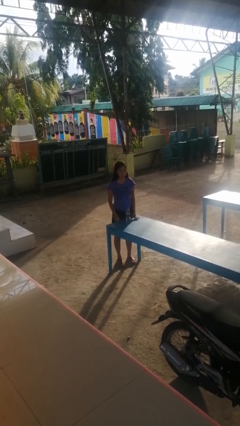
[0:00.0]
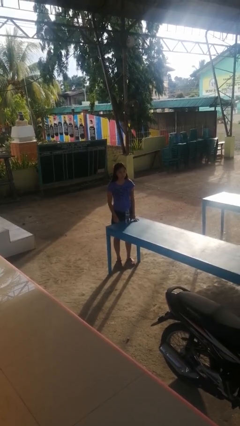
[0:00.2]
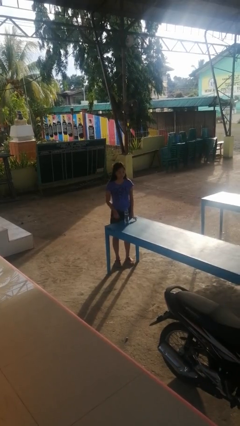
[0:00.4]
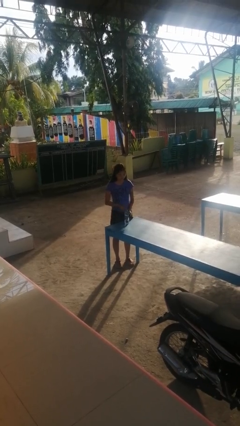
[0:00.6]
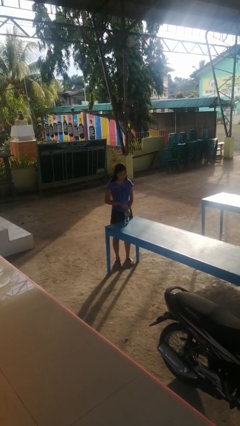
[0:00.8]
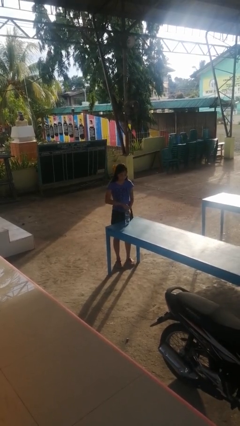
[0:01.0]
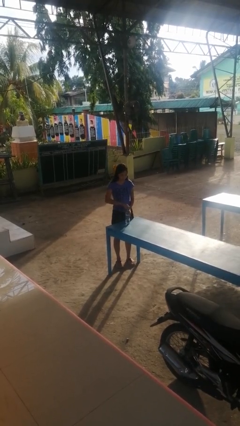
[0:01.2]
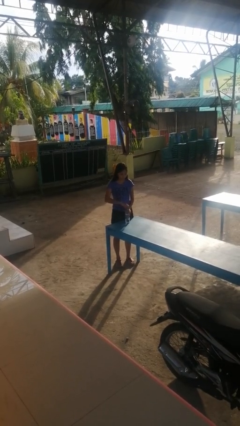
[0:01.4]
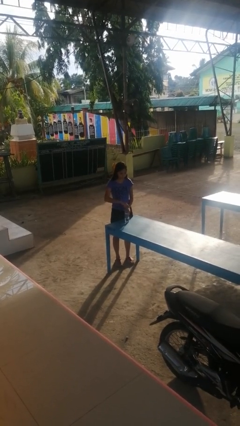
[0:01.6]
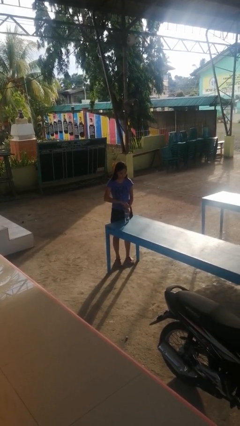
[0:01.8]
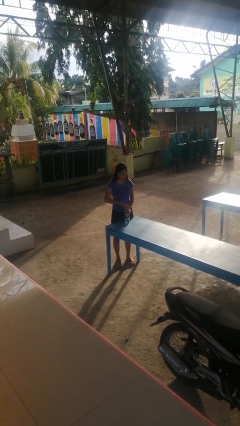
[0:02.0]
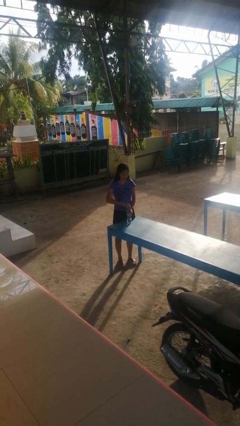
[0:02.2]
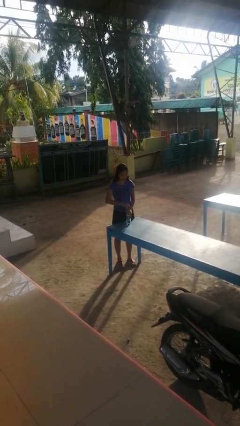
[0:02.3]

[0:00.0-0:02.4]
person unscrews lid from bottle

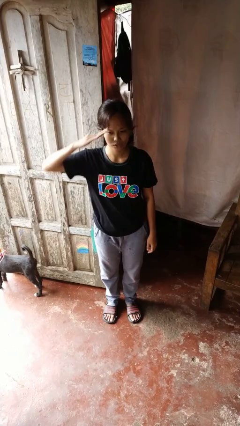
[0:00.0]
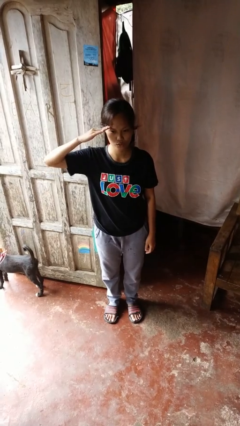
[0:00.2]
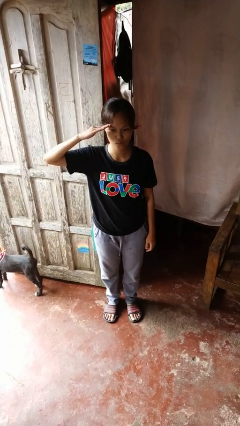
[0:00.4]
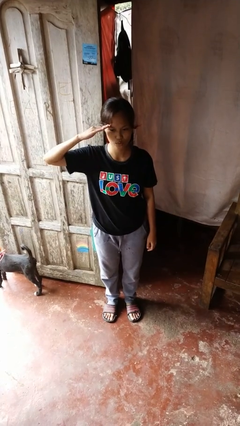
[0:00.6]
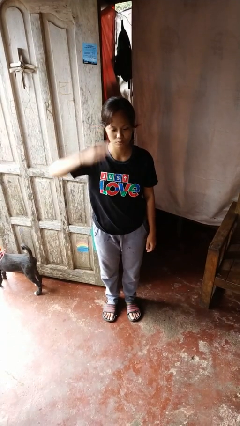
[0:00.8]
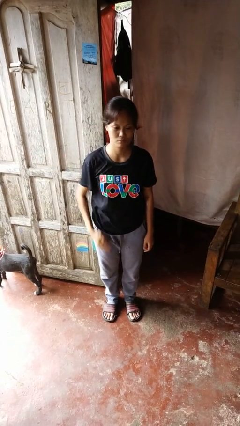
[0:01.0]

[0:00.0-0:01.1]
person salutes

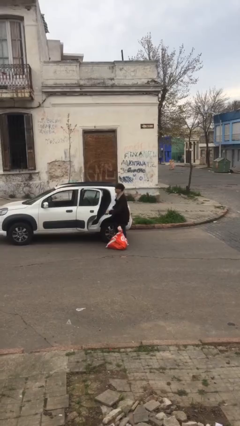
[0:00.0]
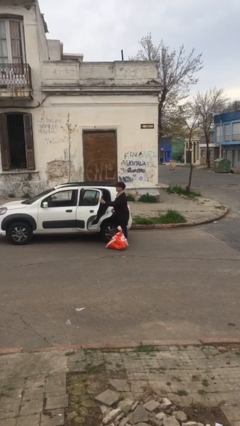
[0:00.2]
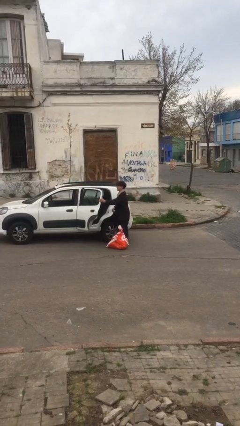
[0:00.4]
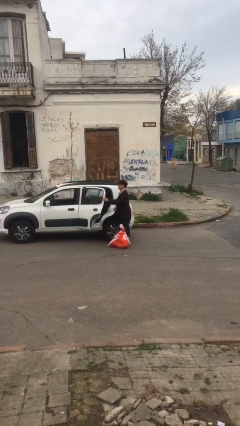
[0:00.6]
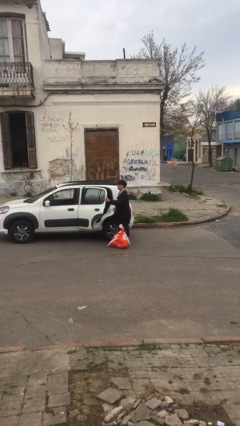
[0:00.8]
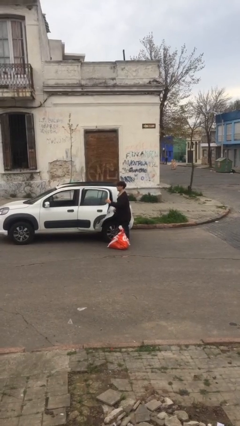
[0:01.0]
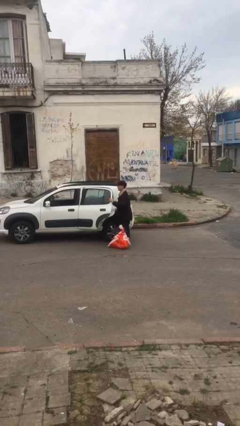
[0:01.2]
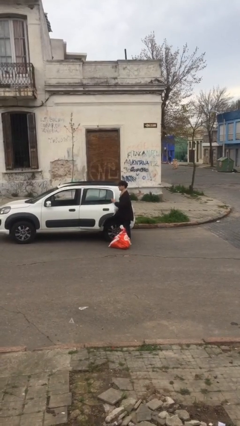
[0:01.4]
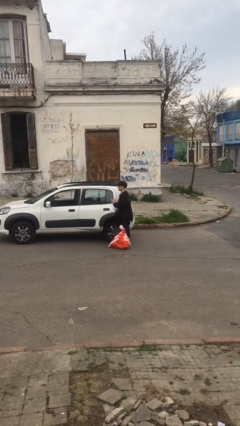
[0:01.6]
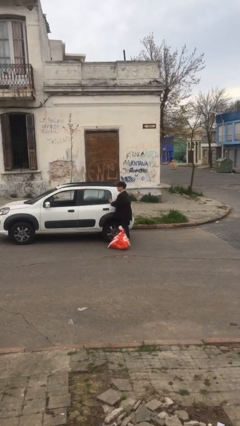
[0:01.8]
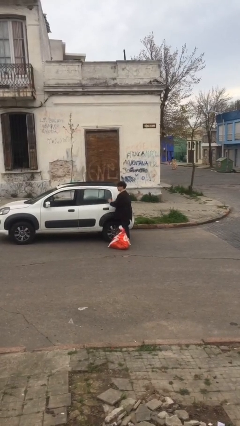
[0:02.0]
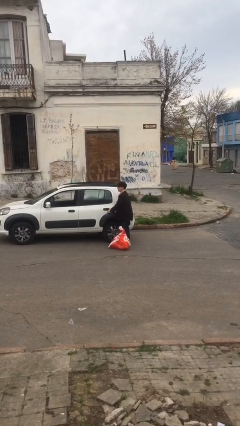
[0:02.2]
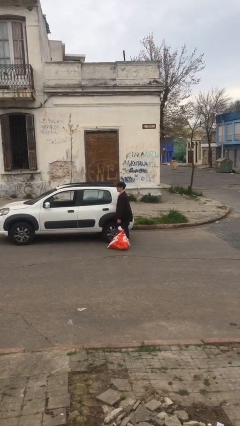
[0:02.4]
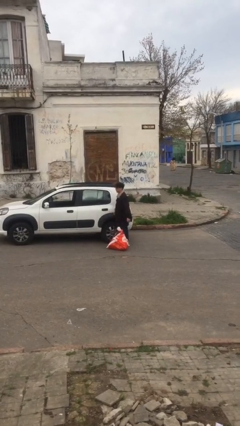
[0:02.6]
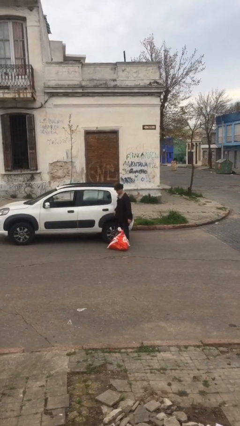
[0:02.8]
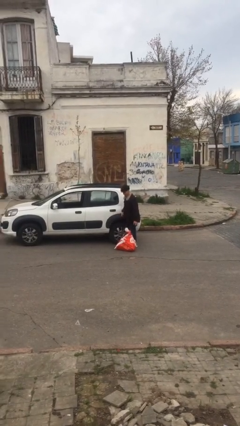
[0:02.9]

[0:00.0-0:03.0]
person closes car door

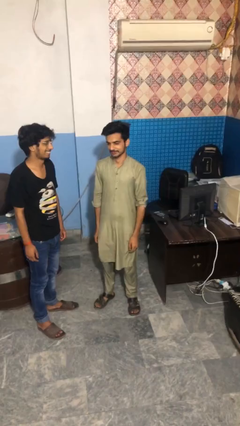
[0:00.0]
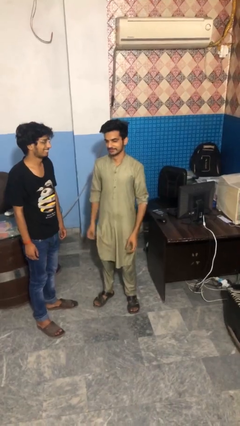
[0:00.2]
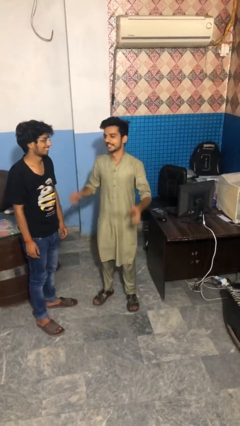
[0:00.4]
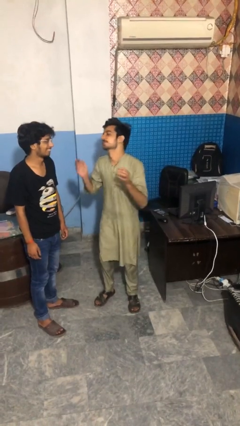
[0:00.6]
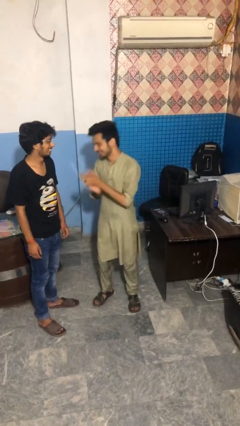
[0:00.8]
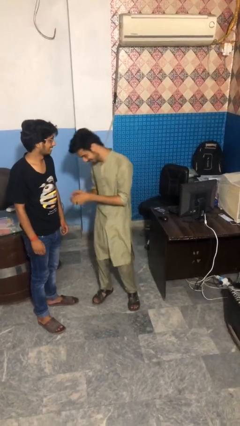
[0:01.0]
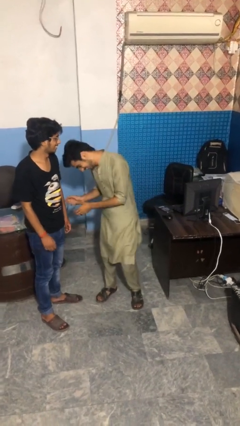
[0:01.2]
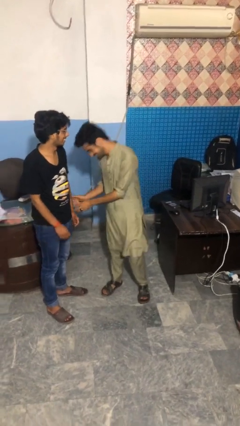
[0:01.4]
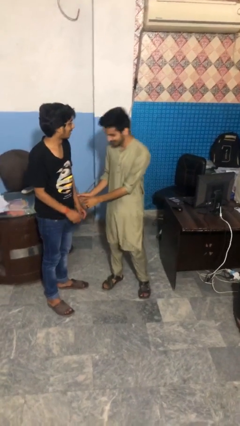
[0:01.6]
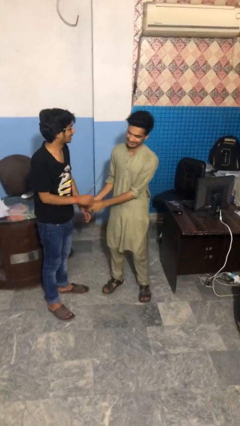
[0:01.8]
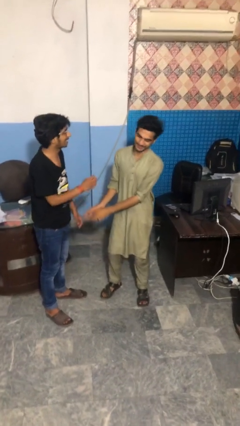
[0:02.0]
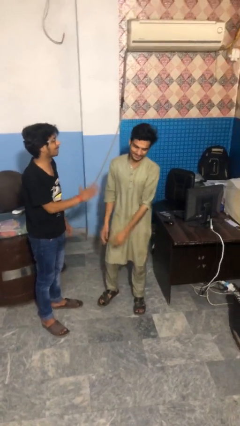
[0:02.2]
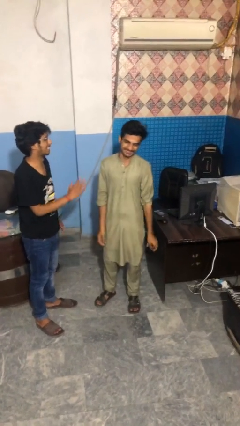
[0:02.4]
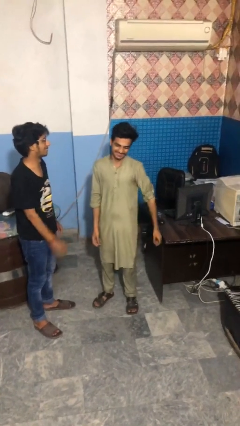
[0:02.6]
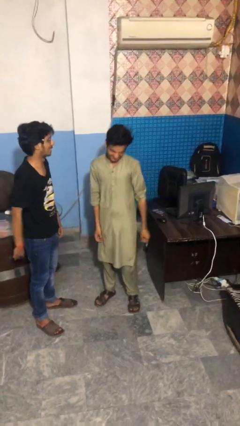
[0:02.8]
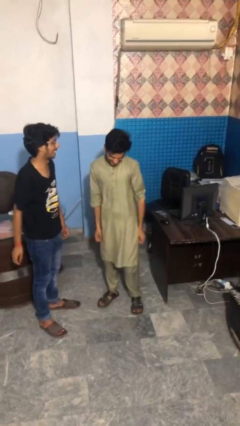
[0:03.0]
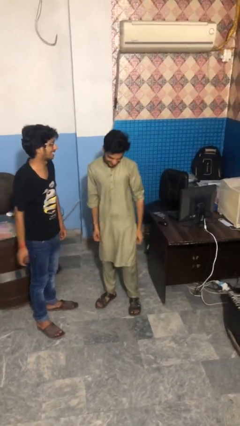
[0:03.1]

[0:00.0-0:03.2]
person laughs with person

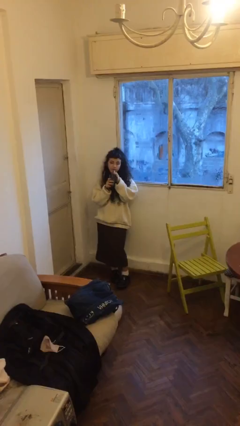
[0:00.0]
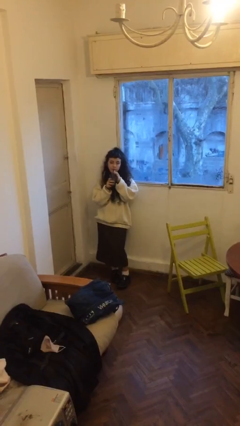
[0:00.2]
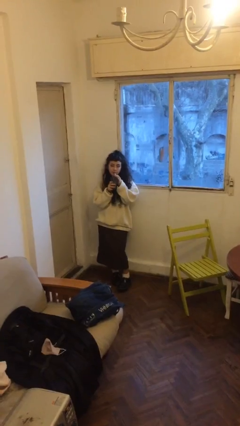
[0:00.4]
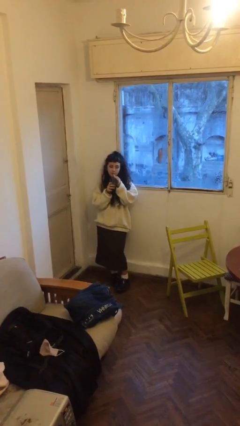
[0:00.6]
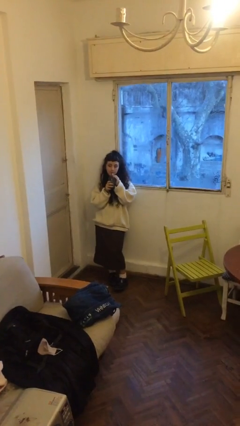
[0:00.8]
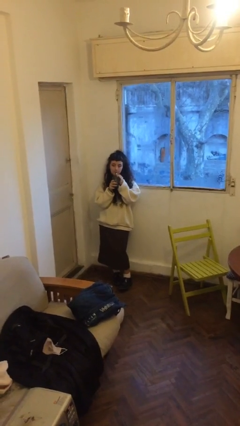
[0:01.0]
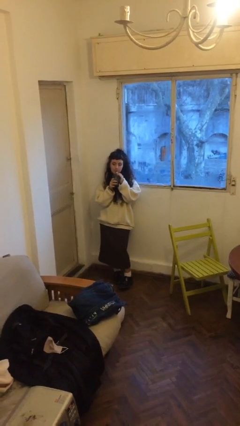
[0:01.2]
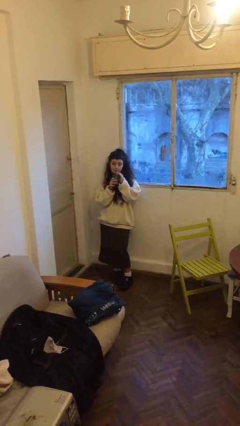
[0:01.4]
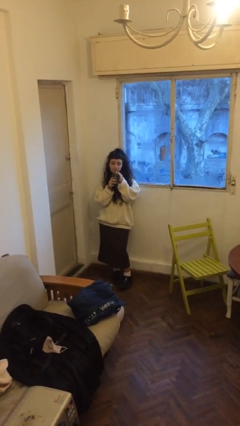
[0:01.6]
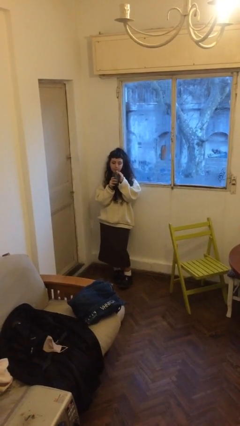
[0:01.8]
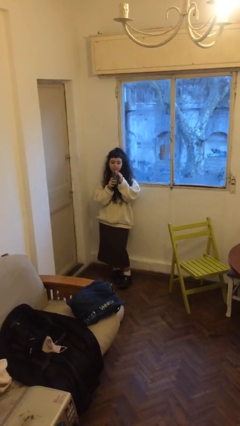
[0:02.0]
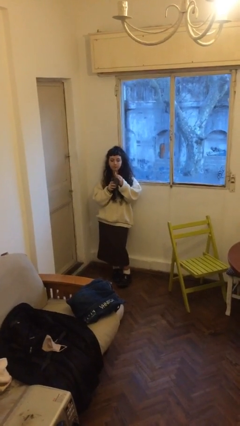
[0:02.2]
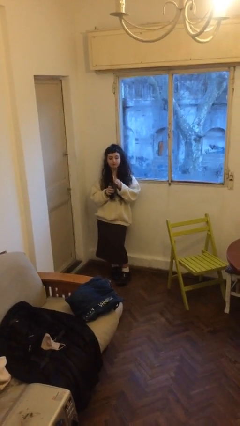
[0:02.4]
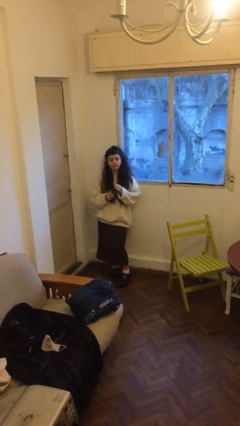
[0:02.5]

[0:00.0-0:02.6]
person drinks from straw

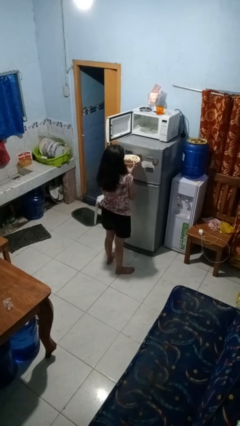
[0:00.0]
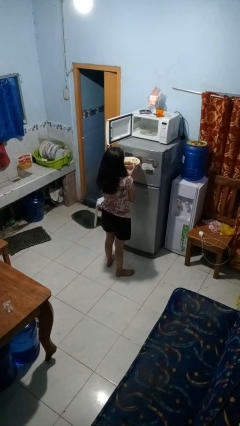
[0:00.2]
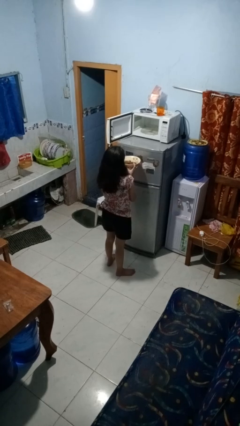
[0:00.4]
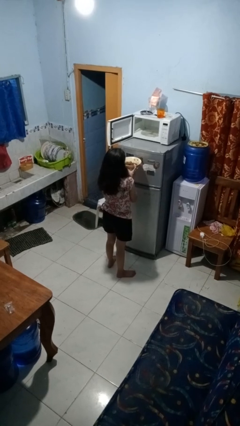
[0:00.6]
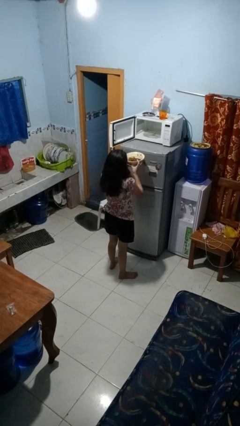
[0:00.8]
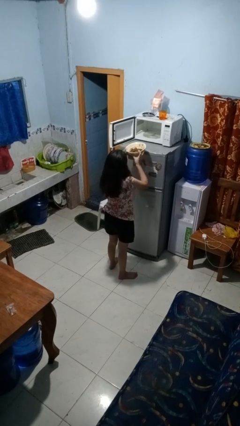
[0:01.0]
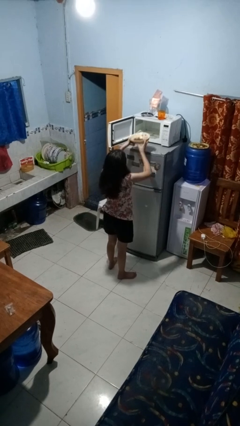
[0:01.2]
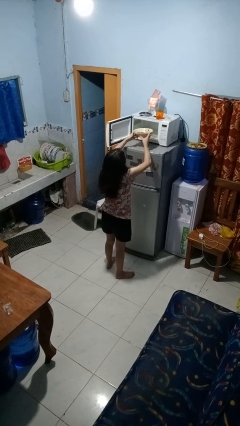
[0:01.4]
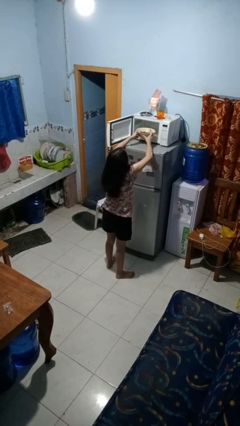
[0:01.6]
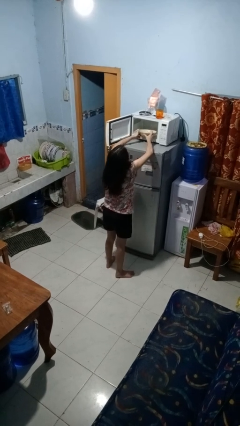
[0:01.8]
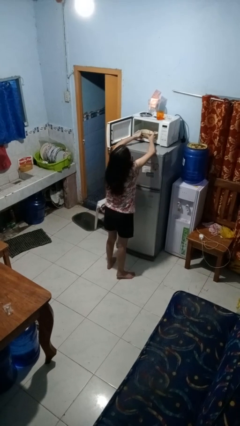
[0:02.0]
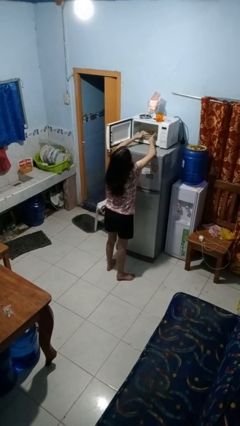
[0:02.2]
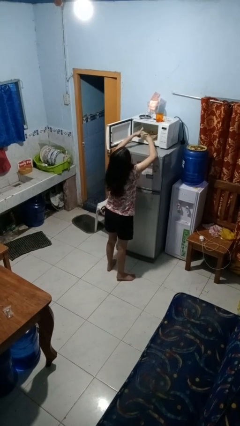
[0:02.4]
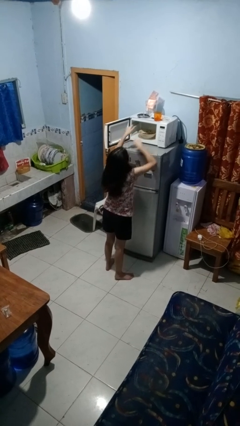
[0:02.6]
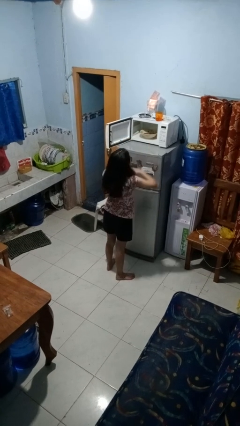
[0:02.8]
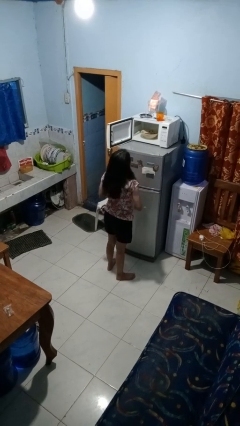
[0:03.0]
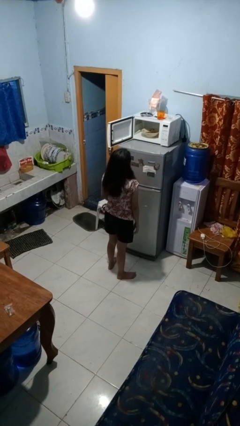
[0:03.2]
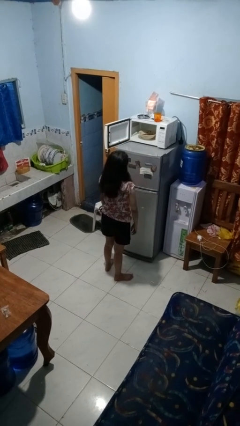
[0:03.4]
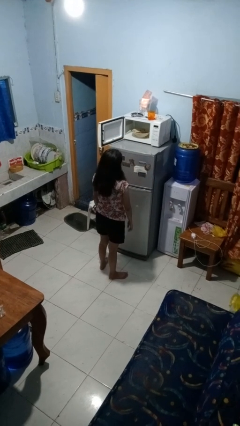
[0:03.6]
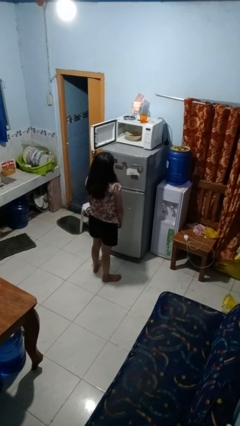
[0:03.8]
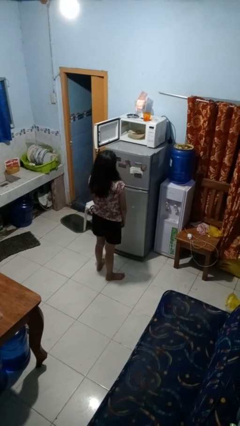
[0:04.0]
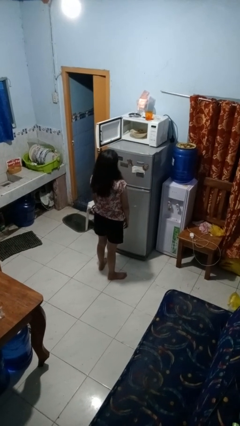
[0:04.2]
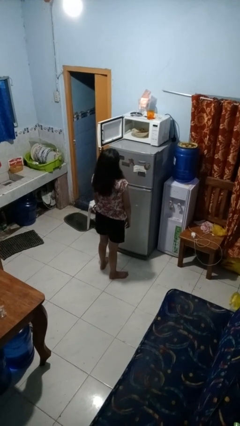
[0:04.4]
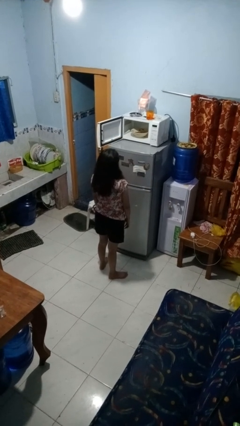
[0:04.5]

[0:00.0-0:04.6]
person puts object into microwave

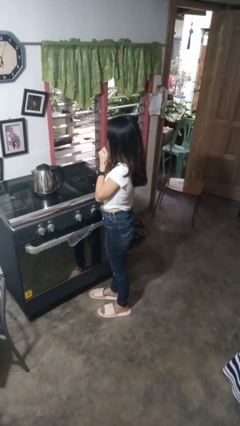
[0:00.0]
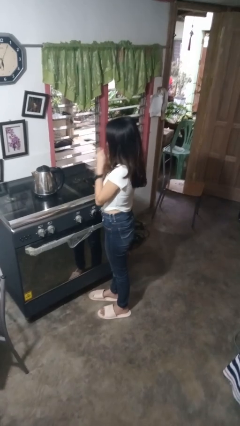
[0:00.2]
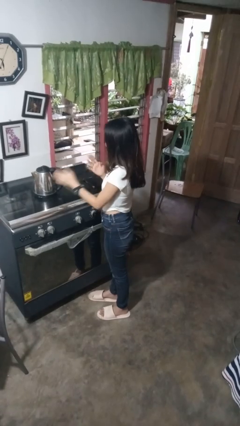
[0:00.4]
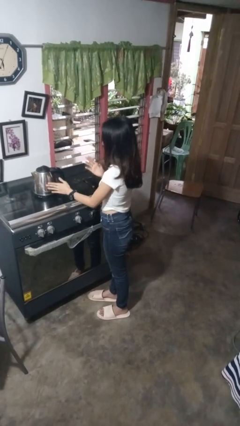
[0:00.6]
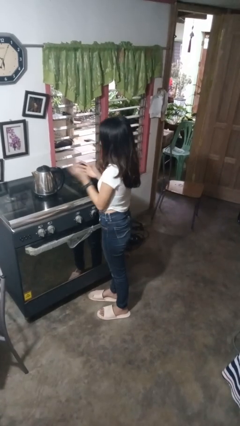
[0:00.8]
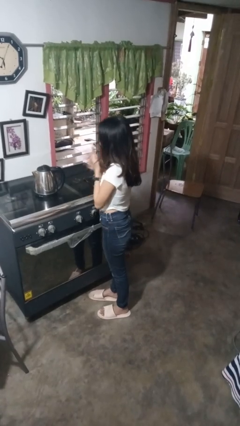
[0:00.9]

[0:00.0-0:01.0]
person burns hand
